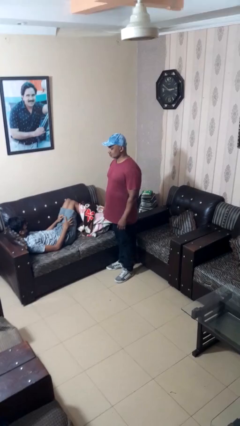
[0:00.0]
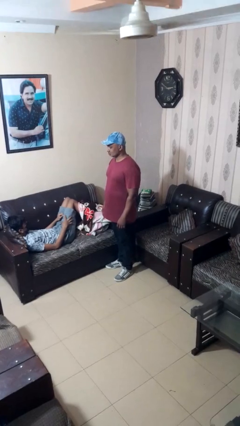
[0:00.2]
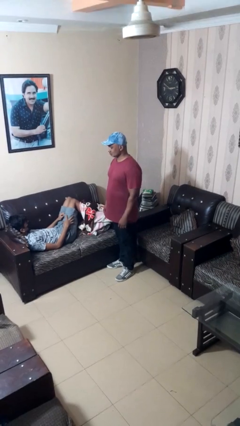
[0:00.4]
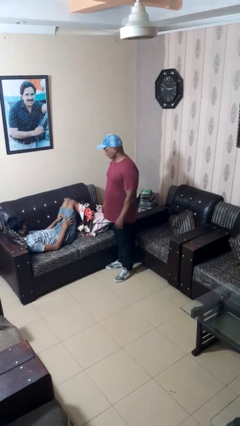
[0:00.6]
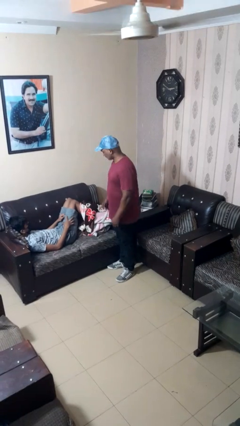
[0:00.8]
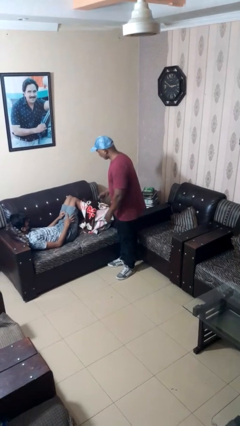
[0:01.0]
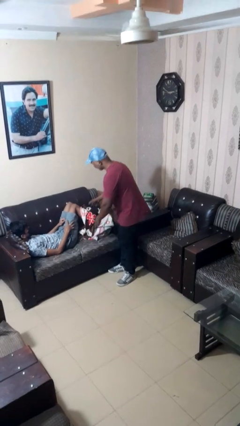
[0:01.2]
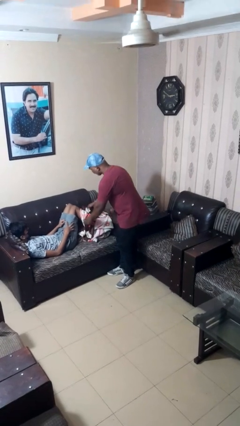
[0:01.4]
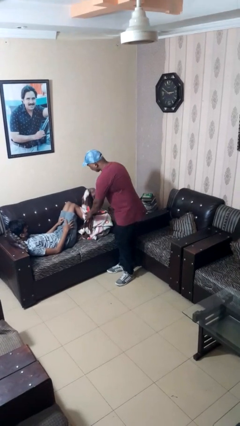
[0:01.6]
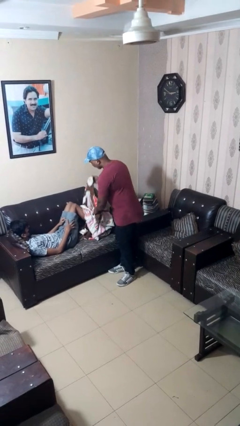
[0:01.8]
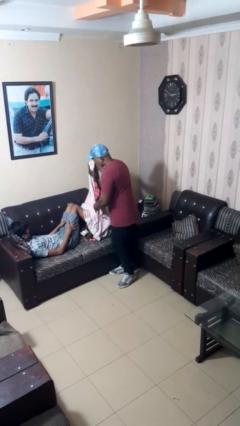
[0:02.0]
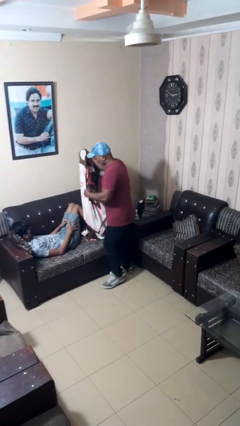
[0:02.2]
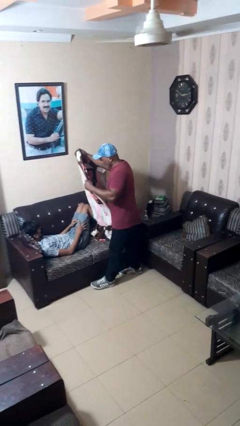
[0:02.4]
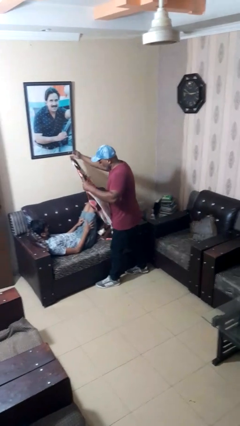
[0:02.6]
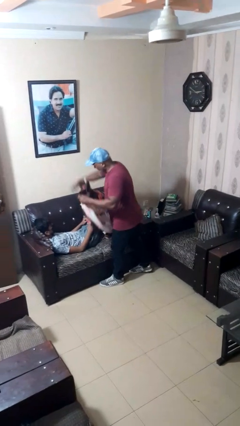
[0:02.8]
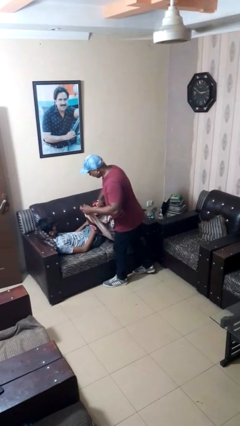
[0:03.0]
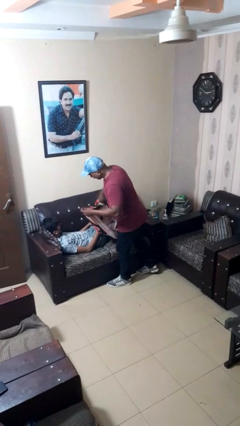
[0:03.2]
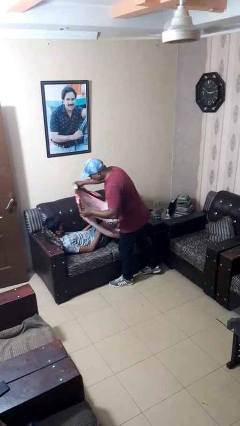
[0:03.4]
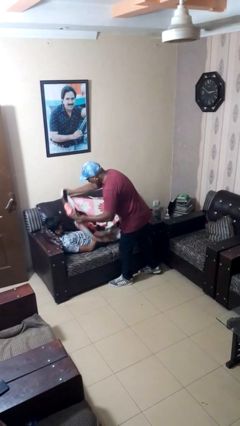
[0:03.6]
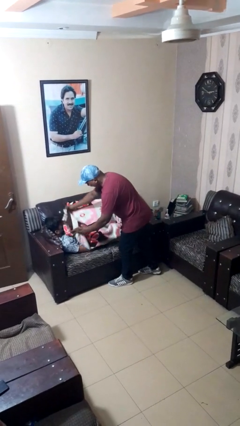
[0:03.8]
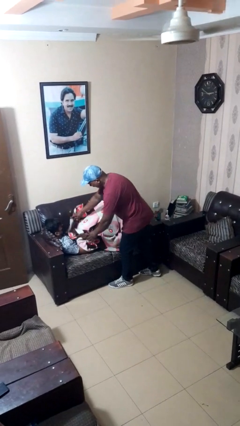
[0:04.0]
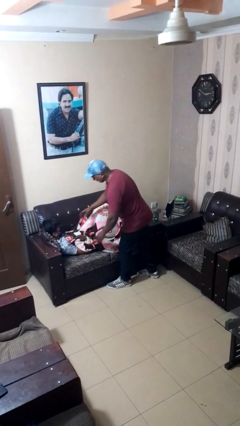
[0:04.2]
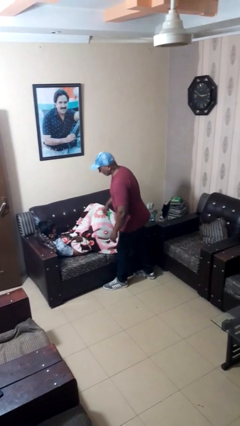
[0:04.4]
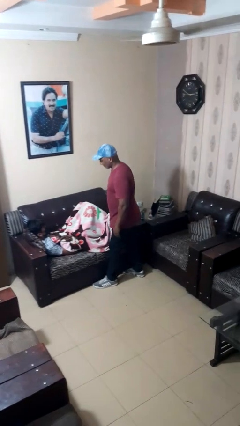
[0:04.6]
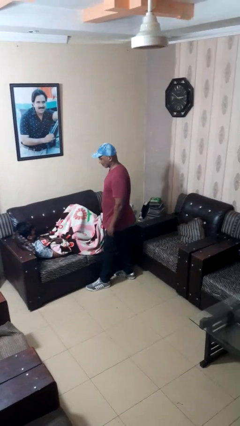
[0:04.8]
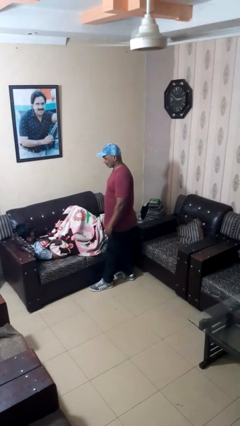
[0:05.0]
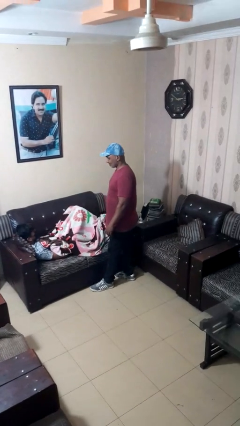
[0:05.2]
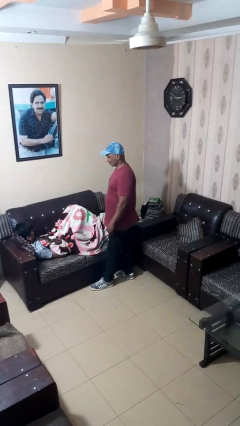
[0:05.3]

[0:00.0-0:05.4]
person covers friend with blanket

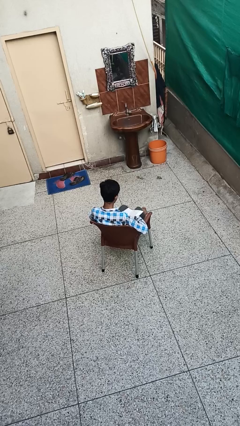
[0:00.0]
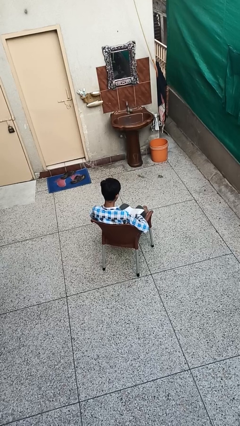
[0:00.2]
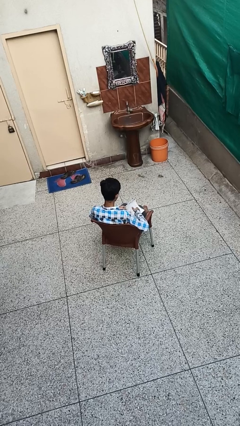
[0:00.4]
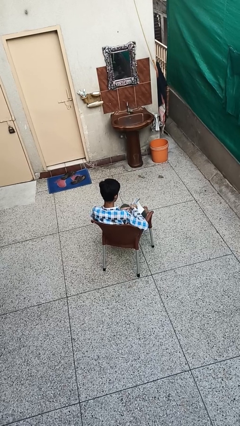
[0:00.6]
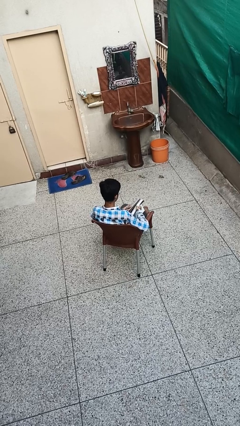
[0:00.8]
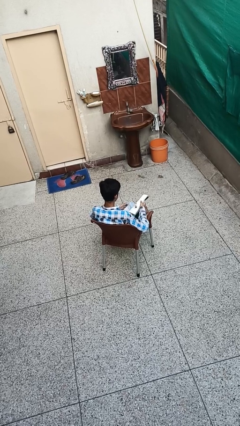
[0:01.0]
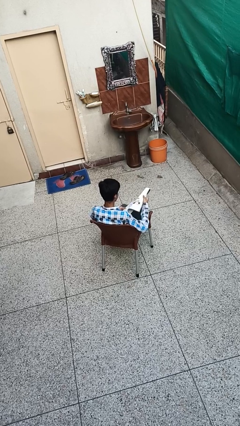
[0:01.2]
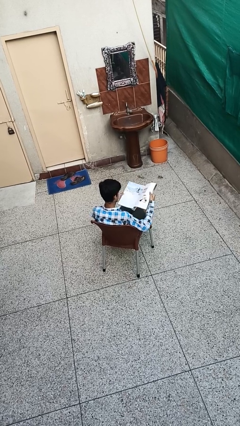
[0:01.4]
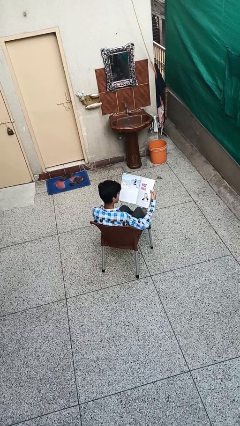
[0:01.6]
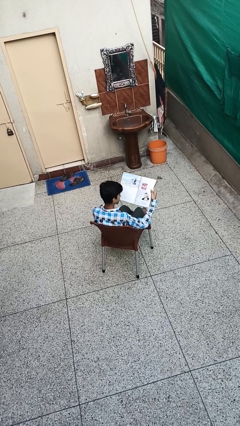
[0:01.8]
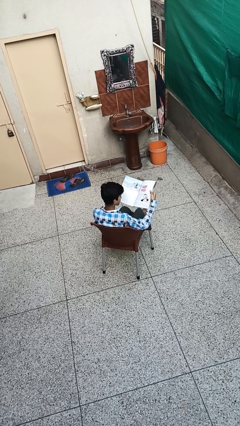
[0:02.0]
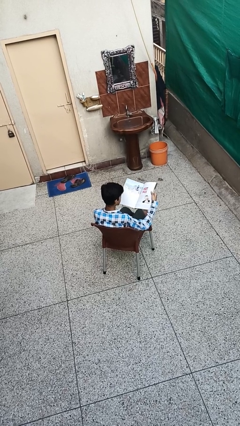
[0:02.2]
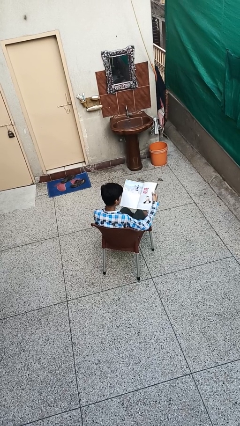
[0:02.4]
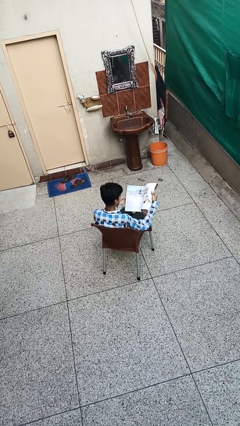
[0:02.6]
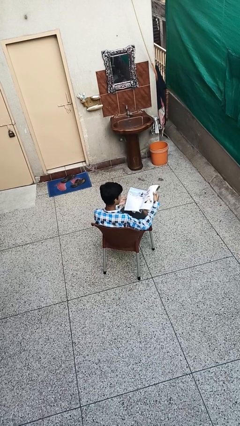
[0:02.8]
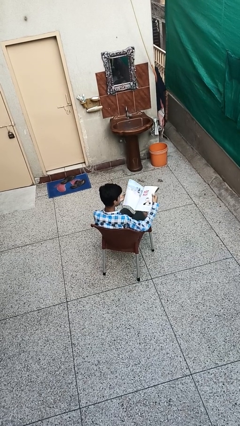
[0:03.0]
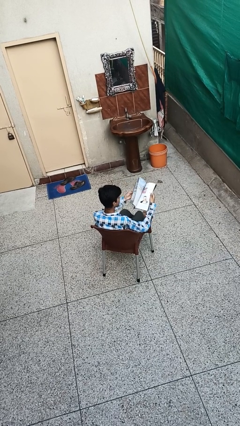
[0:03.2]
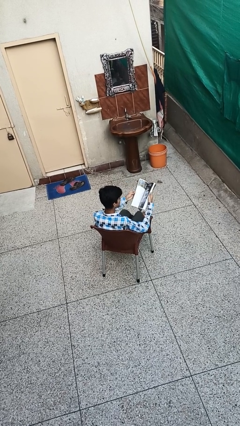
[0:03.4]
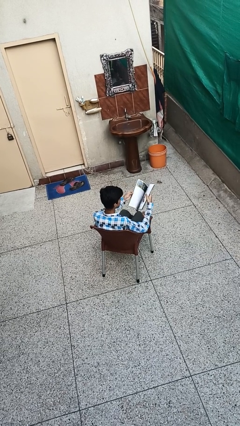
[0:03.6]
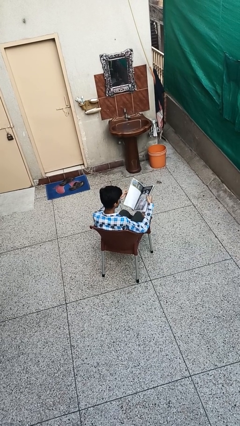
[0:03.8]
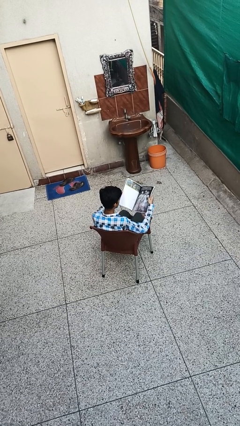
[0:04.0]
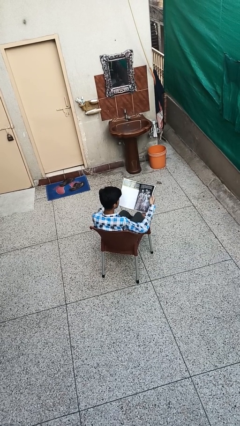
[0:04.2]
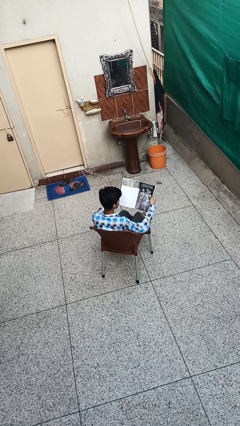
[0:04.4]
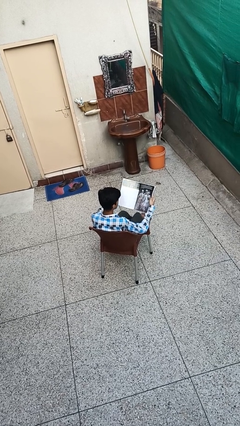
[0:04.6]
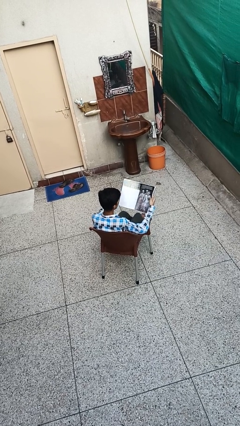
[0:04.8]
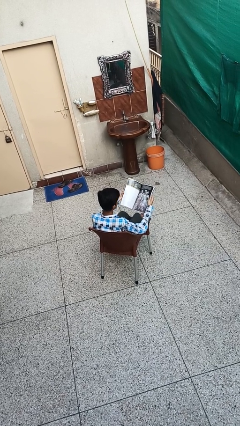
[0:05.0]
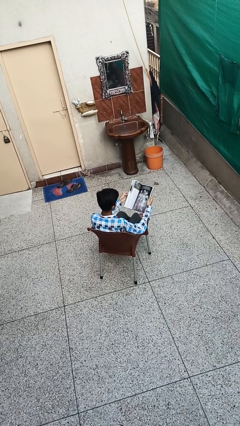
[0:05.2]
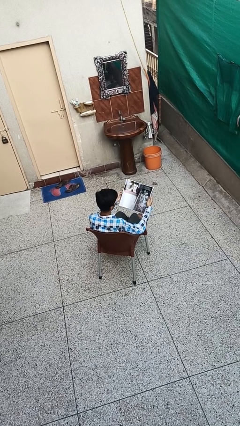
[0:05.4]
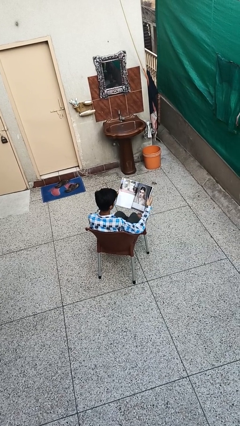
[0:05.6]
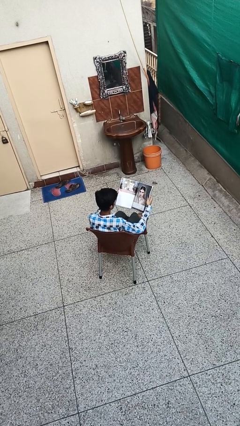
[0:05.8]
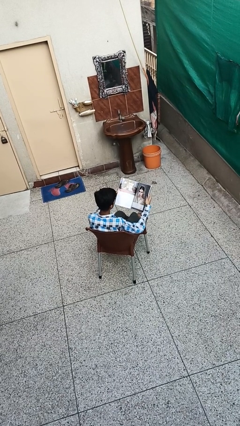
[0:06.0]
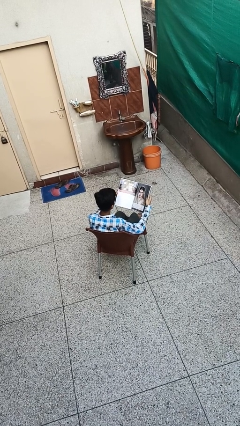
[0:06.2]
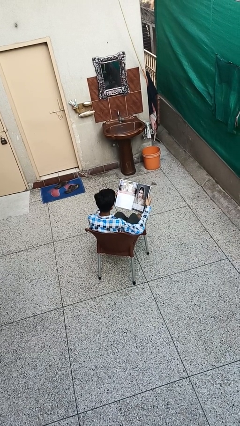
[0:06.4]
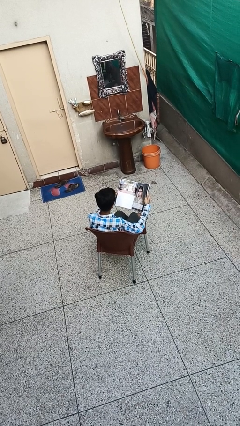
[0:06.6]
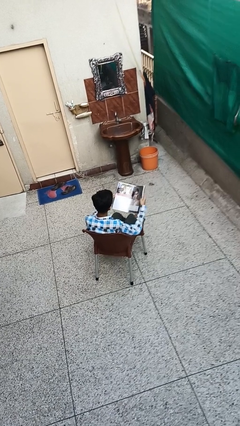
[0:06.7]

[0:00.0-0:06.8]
person reads magazine

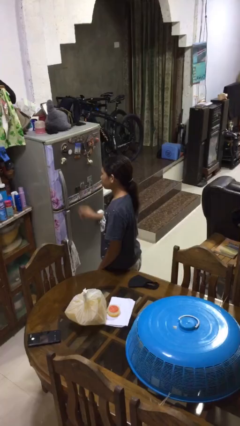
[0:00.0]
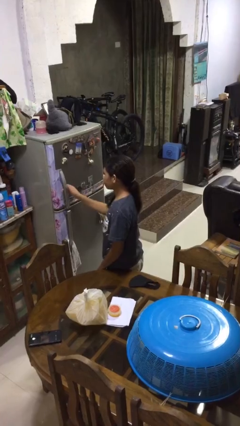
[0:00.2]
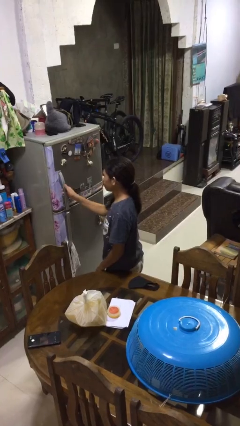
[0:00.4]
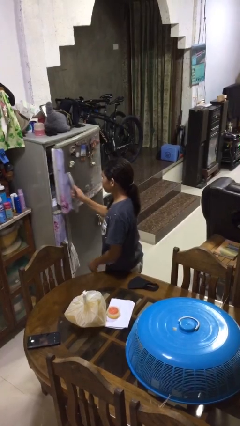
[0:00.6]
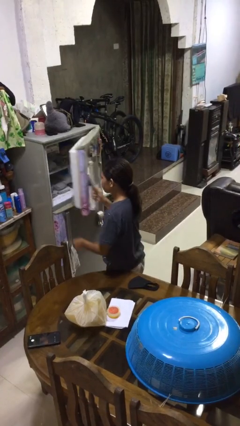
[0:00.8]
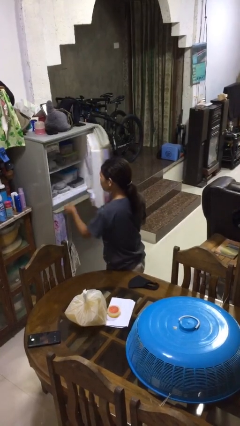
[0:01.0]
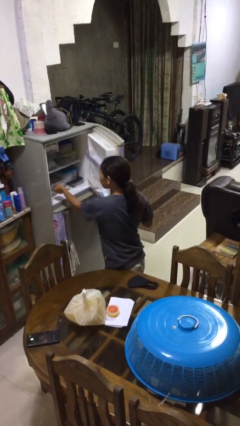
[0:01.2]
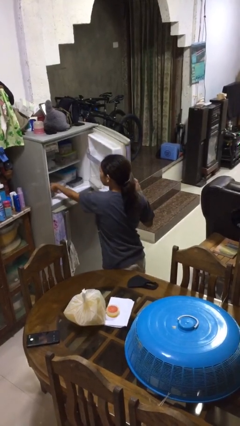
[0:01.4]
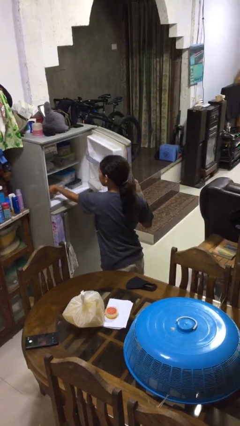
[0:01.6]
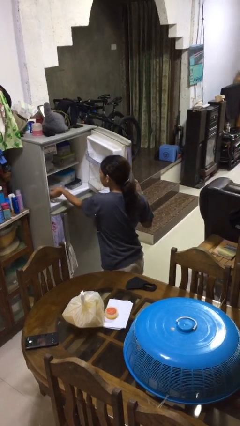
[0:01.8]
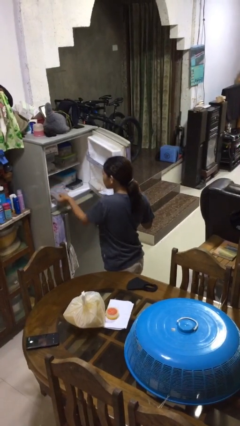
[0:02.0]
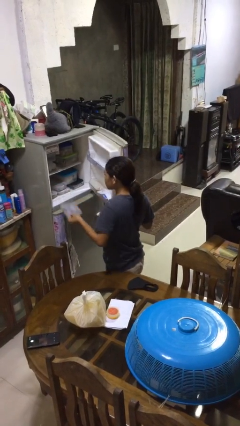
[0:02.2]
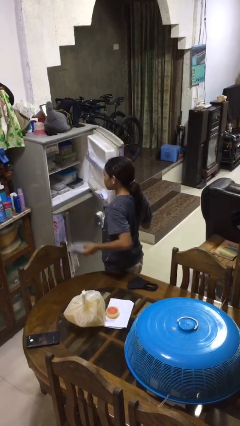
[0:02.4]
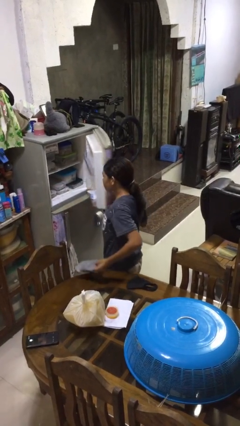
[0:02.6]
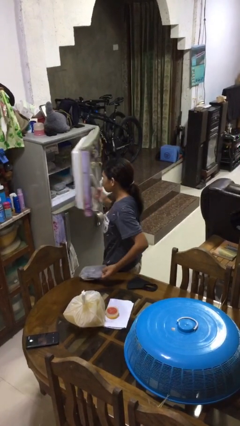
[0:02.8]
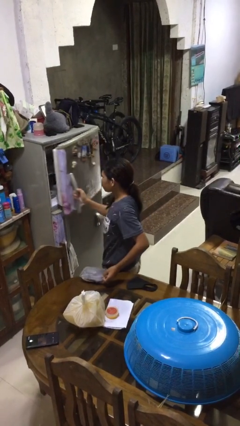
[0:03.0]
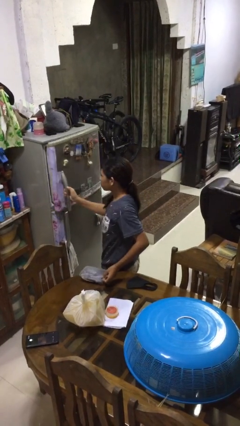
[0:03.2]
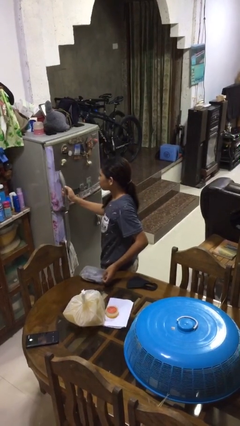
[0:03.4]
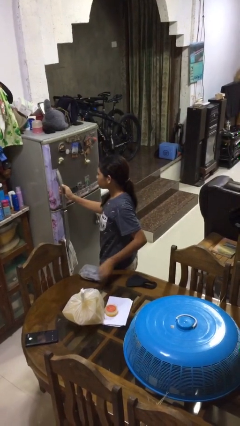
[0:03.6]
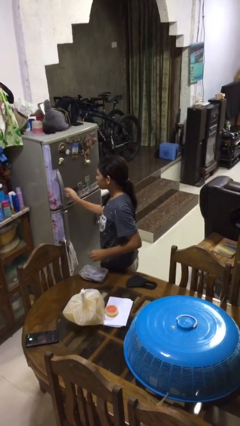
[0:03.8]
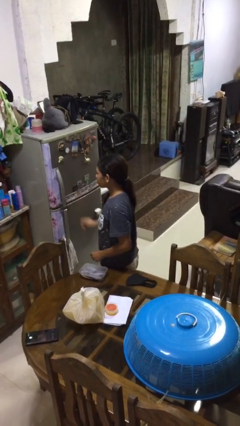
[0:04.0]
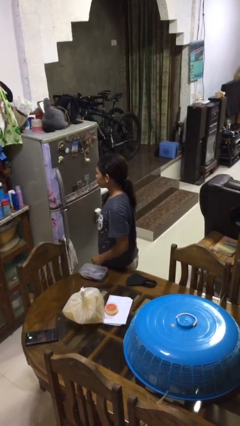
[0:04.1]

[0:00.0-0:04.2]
person takes object from refrigerator

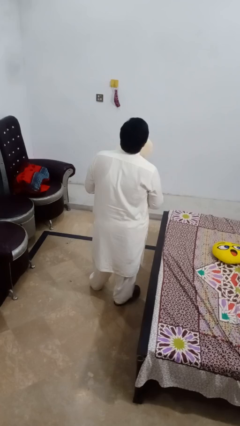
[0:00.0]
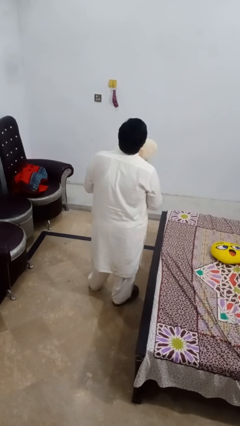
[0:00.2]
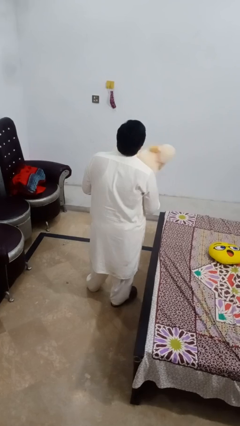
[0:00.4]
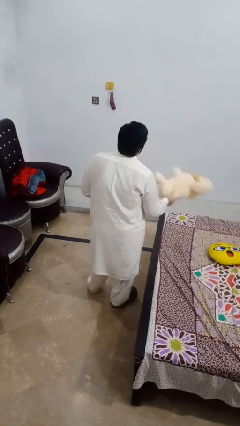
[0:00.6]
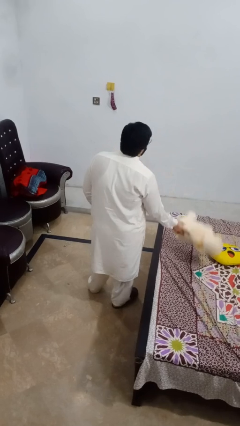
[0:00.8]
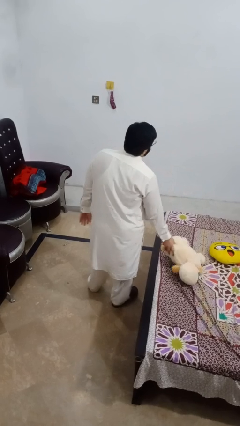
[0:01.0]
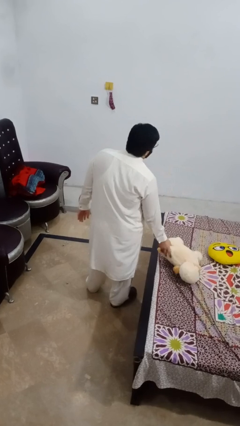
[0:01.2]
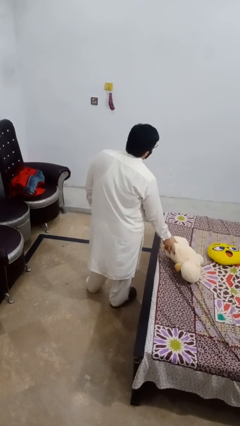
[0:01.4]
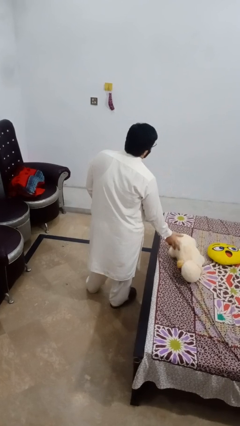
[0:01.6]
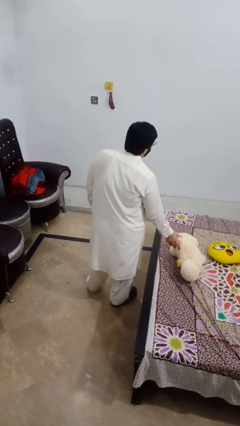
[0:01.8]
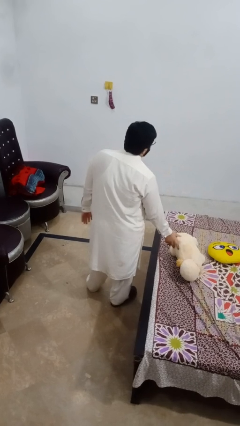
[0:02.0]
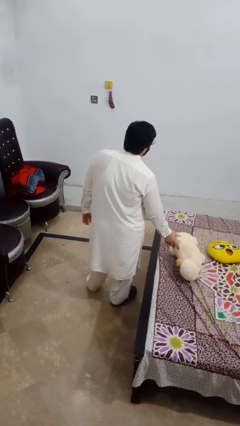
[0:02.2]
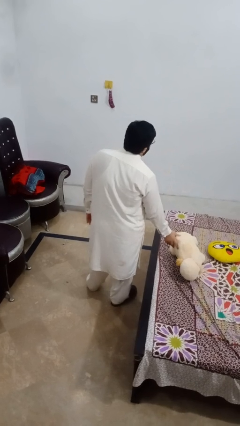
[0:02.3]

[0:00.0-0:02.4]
person puts down object on bed
